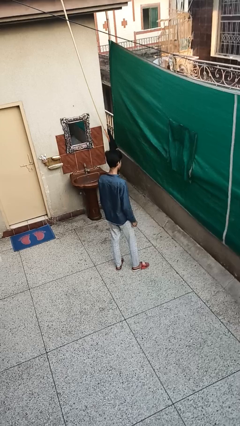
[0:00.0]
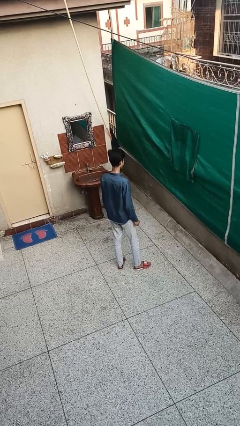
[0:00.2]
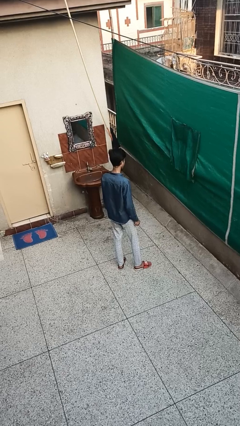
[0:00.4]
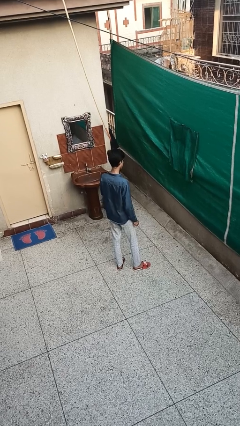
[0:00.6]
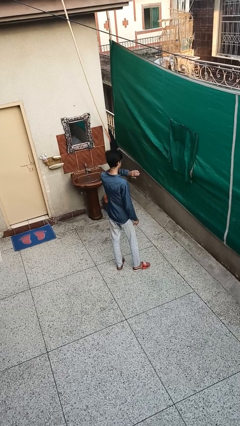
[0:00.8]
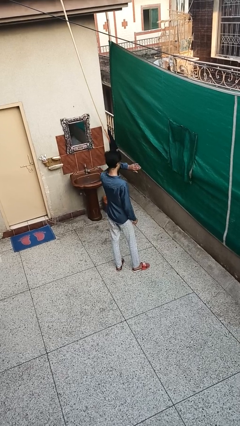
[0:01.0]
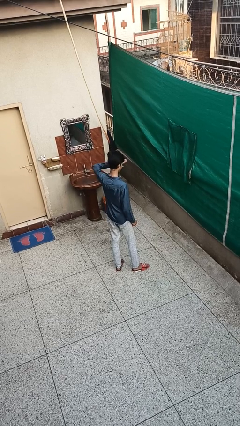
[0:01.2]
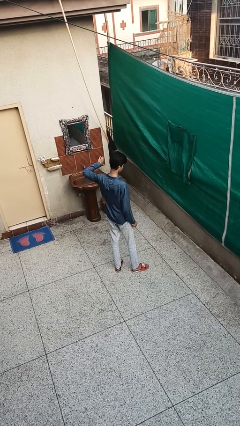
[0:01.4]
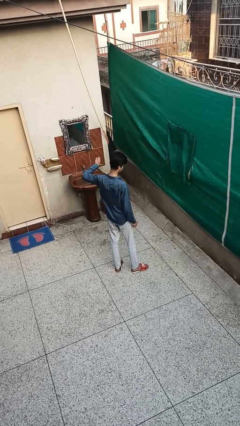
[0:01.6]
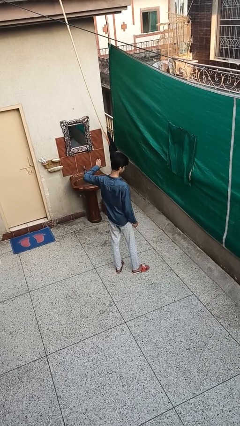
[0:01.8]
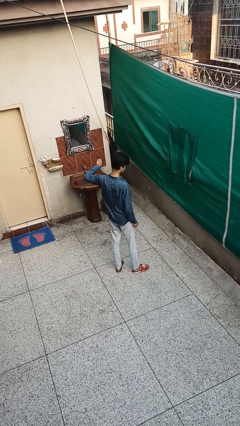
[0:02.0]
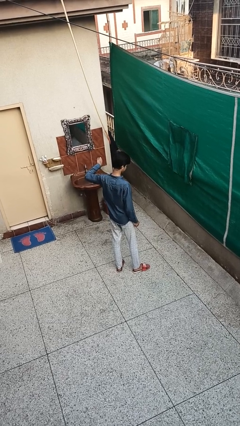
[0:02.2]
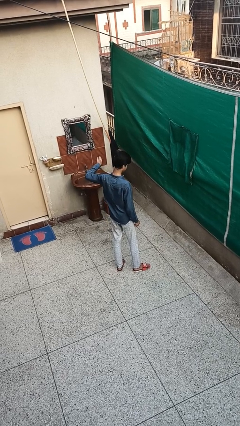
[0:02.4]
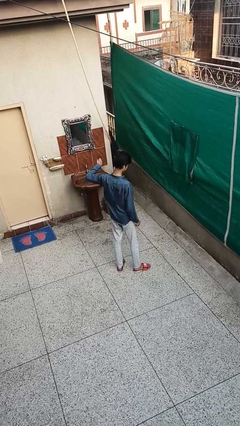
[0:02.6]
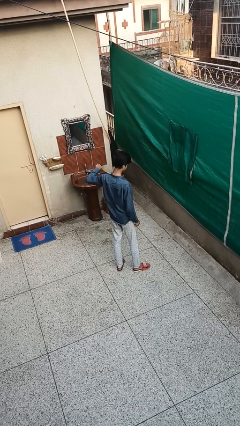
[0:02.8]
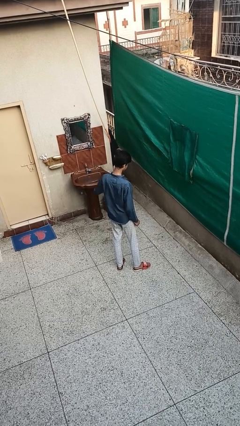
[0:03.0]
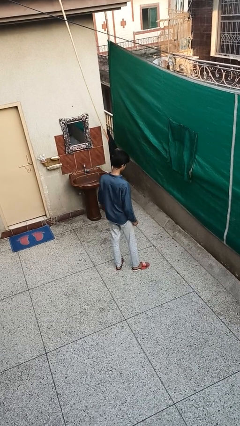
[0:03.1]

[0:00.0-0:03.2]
person gestures swipe left

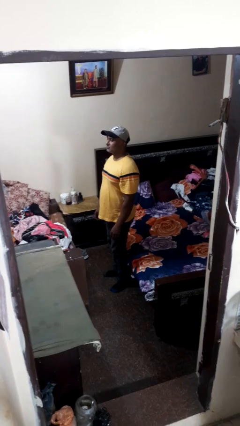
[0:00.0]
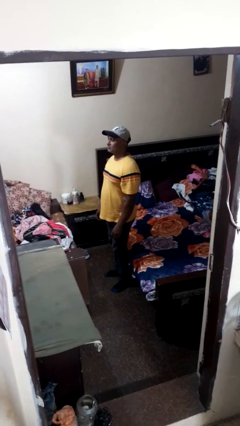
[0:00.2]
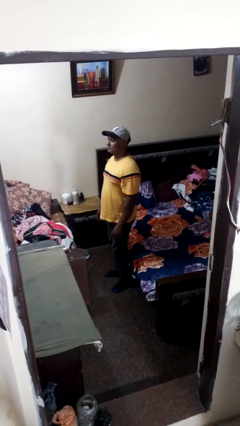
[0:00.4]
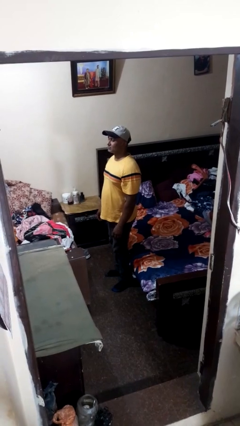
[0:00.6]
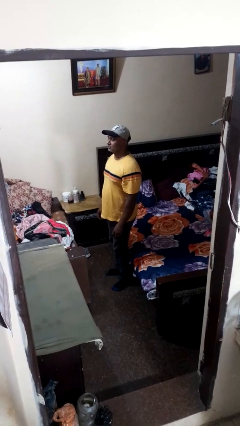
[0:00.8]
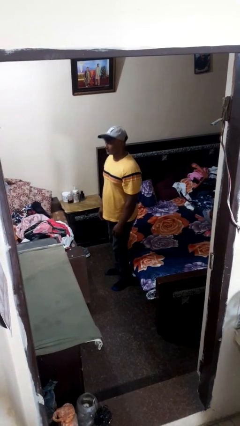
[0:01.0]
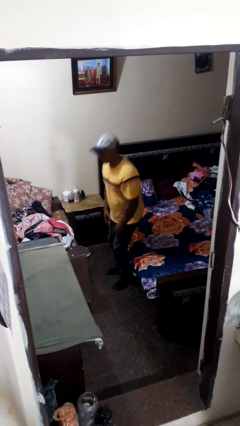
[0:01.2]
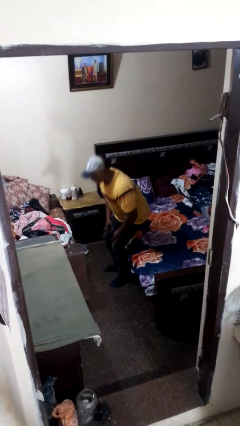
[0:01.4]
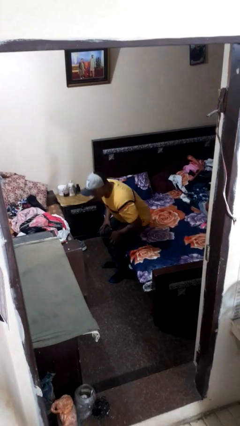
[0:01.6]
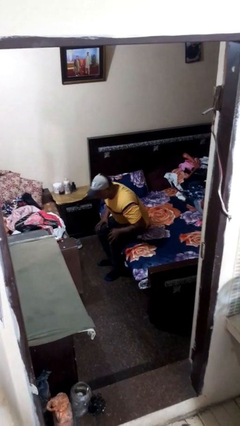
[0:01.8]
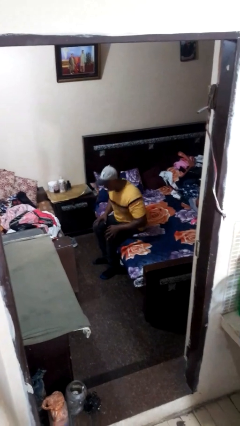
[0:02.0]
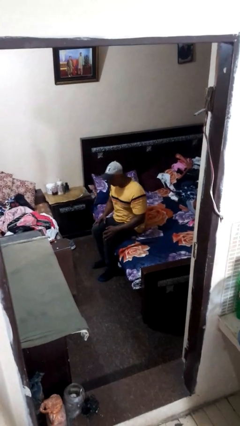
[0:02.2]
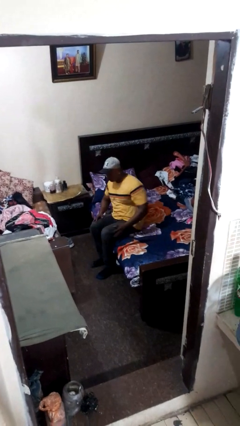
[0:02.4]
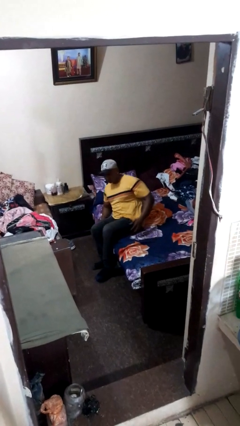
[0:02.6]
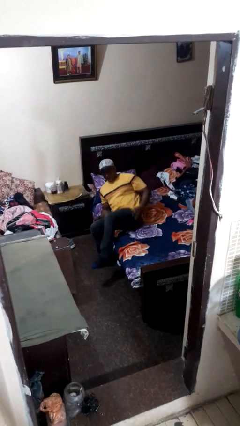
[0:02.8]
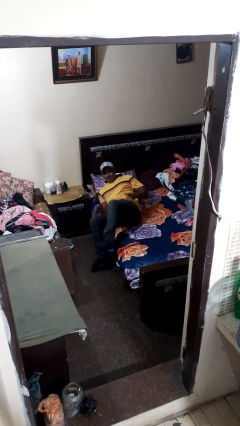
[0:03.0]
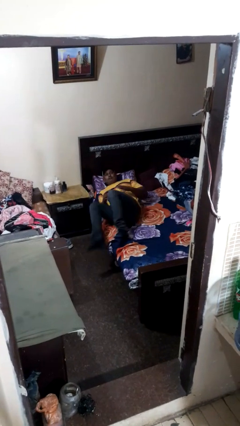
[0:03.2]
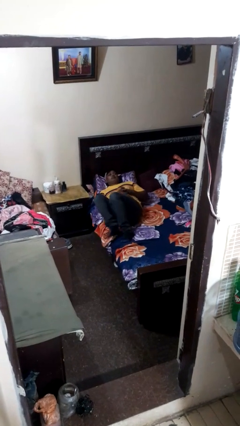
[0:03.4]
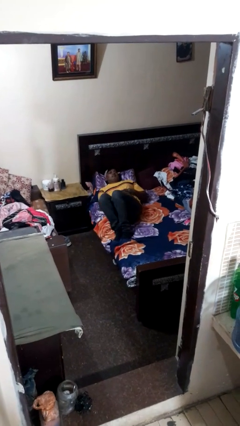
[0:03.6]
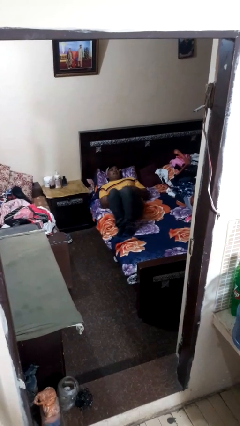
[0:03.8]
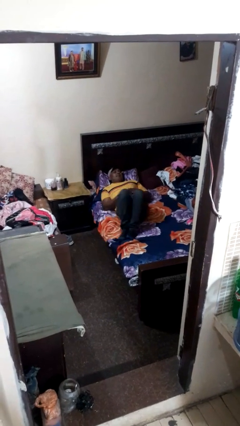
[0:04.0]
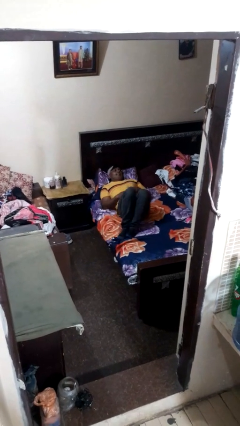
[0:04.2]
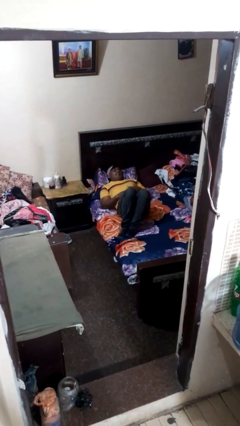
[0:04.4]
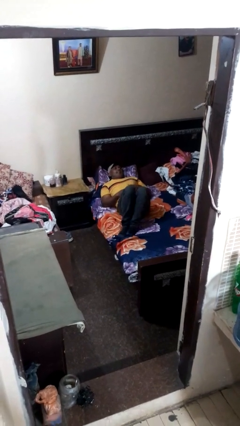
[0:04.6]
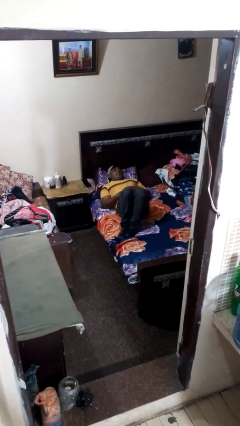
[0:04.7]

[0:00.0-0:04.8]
person lies down on bed

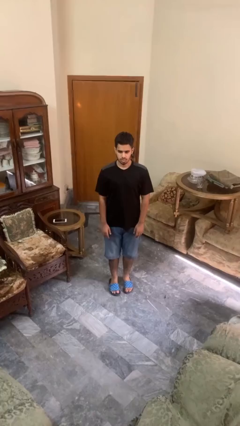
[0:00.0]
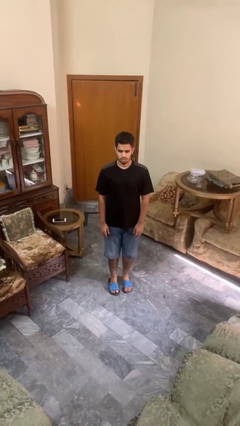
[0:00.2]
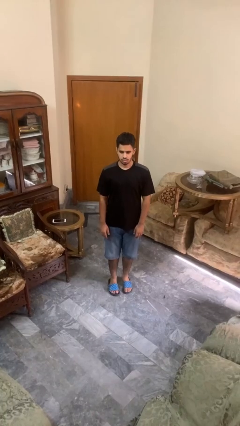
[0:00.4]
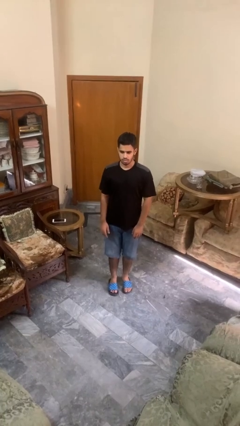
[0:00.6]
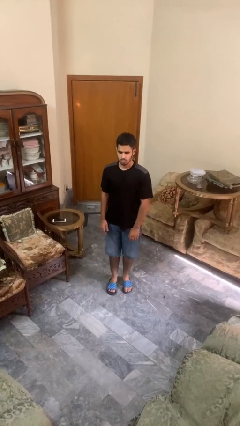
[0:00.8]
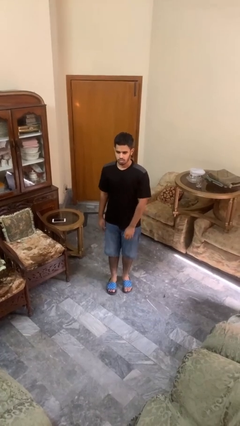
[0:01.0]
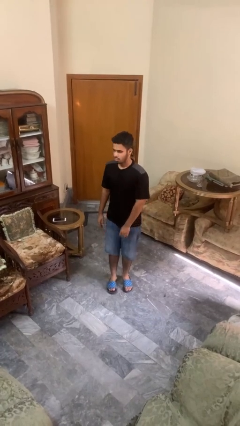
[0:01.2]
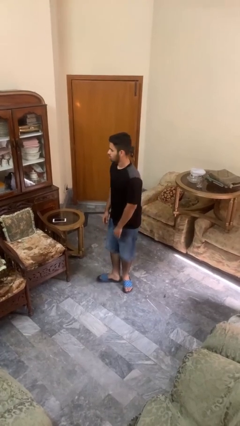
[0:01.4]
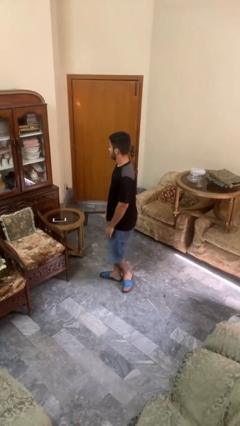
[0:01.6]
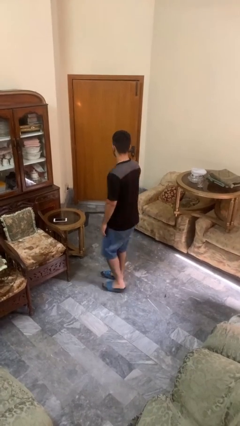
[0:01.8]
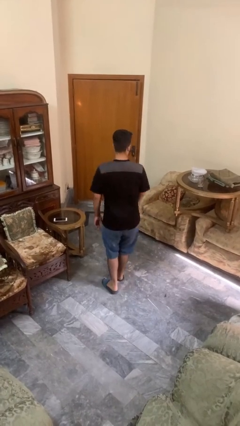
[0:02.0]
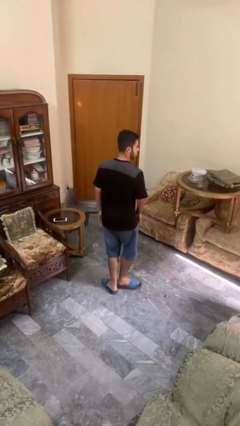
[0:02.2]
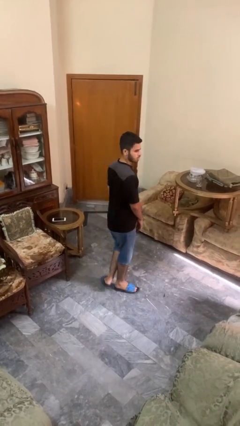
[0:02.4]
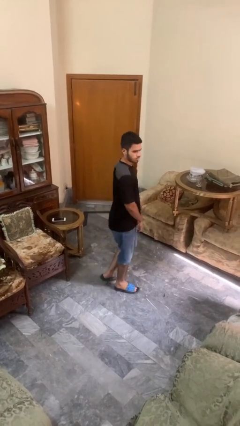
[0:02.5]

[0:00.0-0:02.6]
person twirls

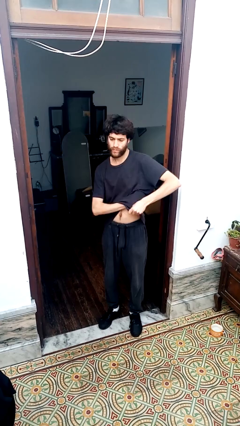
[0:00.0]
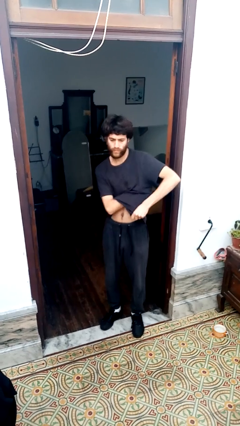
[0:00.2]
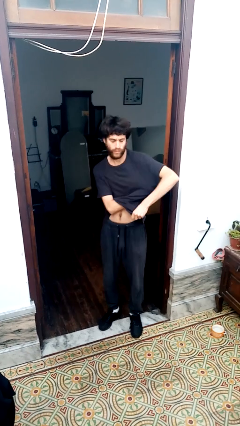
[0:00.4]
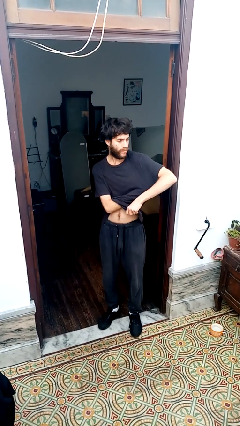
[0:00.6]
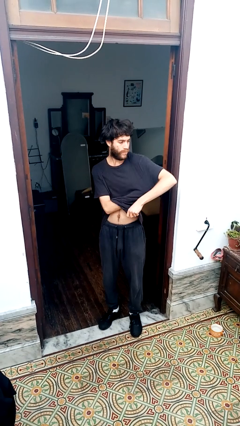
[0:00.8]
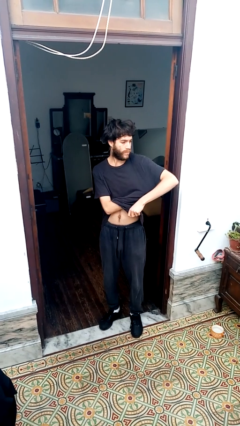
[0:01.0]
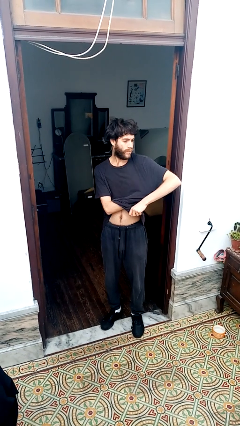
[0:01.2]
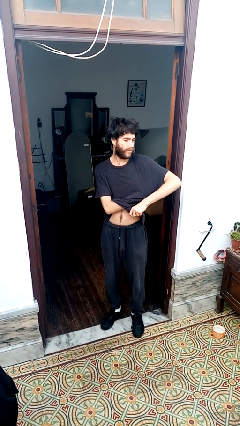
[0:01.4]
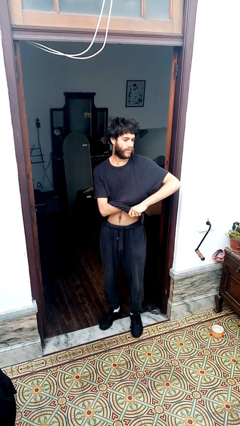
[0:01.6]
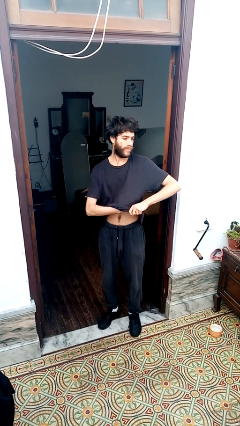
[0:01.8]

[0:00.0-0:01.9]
person applies deodorant

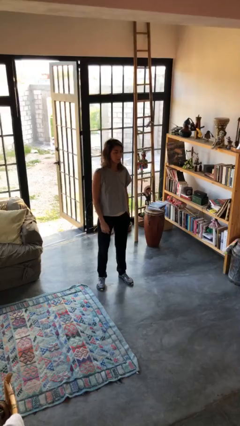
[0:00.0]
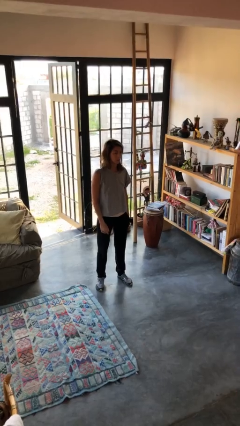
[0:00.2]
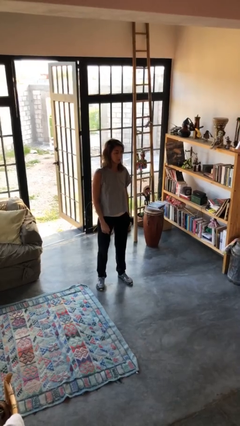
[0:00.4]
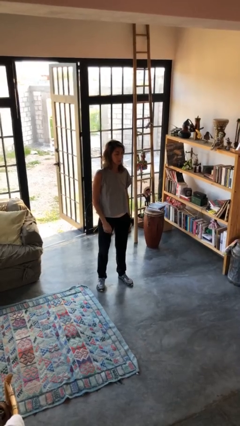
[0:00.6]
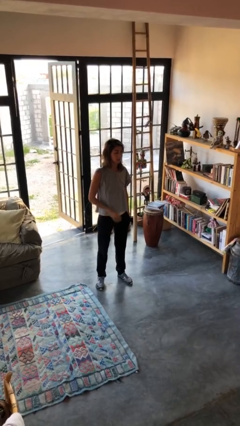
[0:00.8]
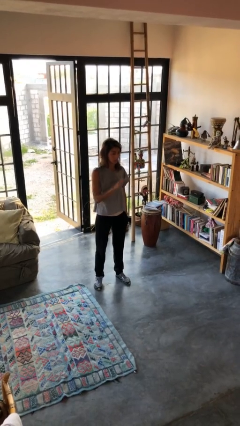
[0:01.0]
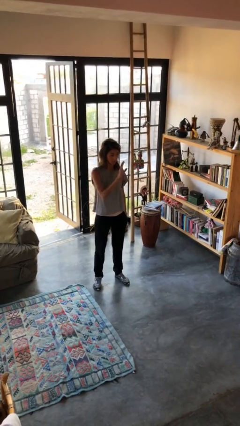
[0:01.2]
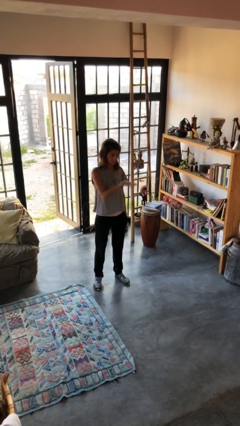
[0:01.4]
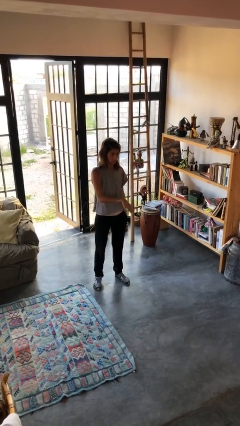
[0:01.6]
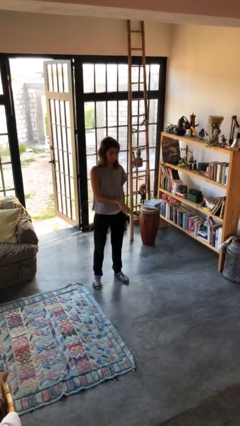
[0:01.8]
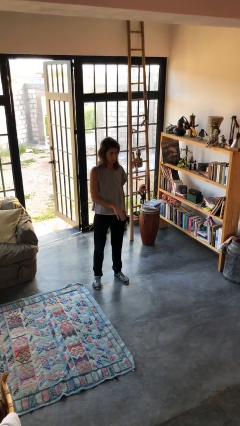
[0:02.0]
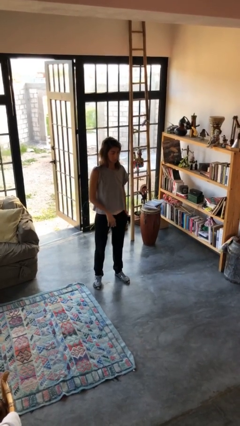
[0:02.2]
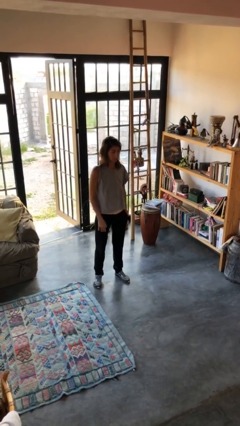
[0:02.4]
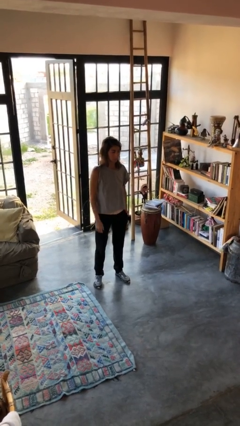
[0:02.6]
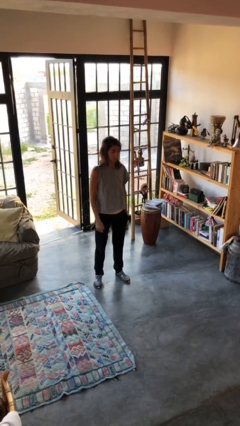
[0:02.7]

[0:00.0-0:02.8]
person gestures swipe down

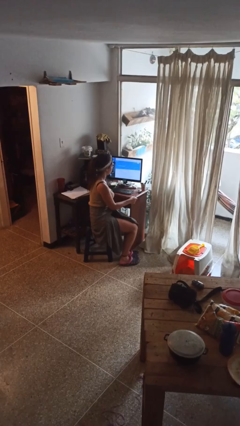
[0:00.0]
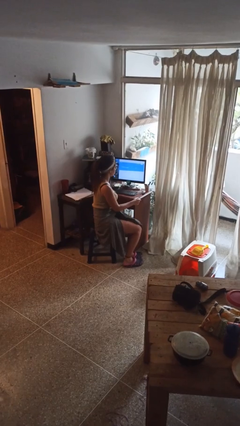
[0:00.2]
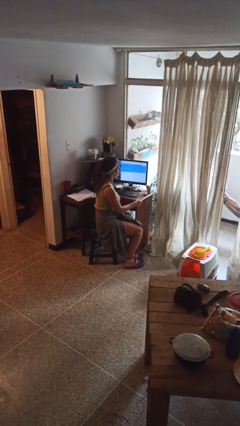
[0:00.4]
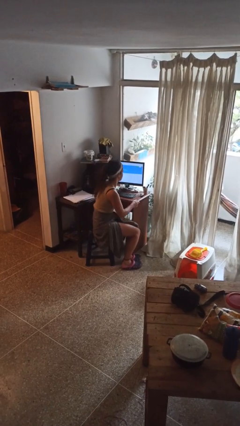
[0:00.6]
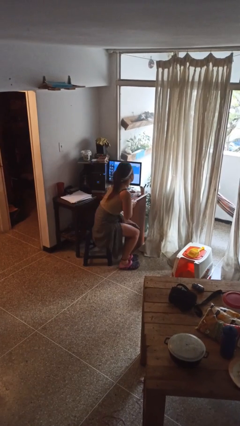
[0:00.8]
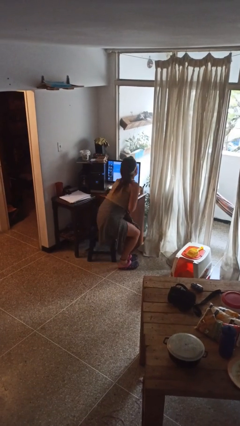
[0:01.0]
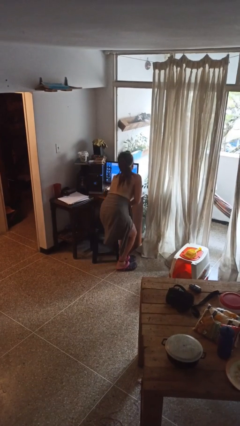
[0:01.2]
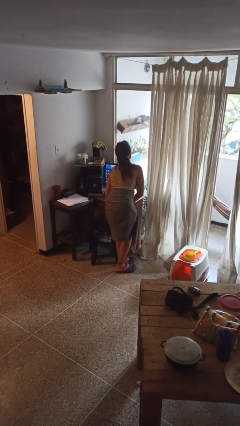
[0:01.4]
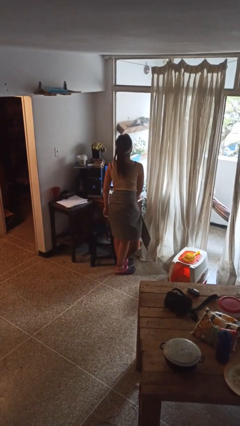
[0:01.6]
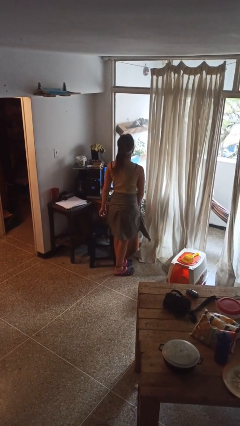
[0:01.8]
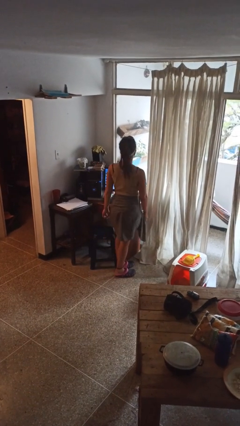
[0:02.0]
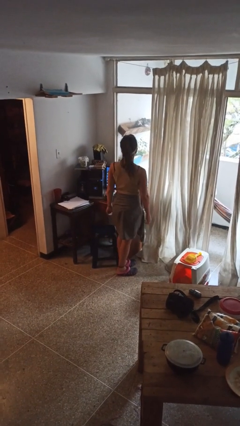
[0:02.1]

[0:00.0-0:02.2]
person stands up

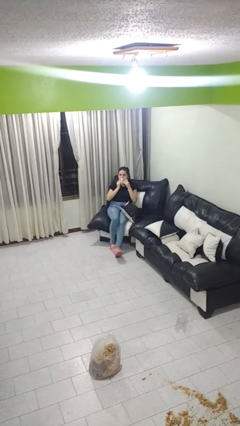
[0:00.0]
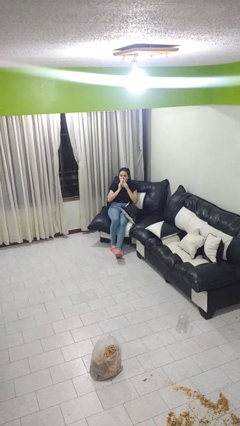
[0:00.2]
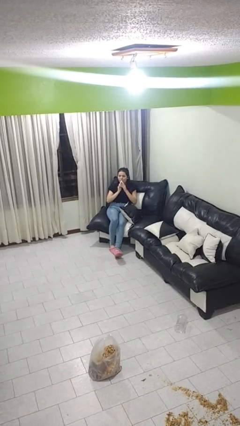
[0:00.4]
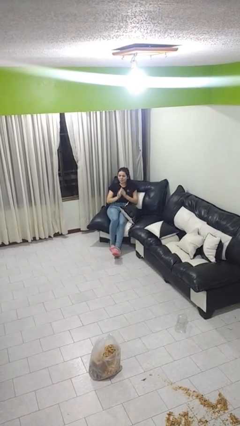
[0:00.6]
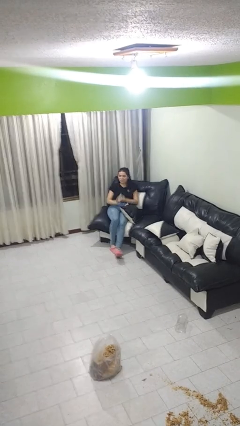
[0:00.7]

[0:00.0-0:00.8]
person wipes mouth with napkin
